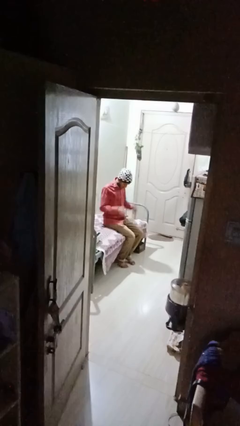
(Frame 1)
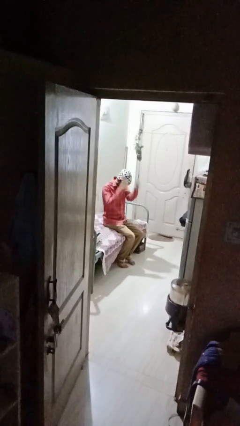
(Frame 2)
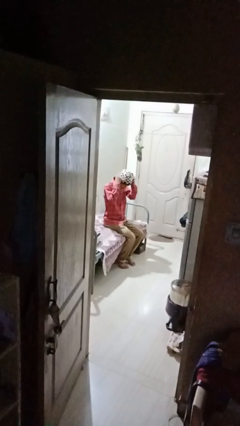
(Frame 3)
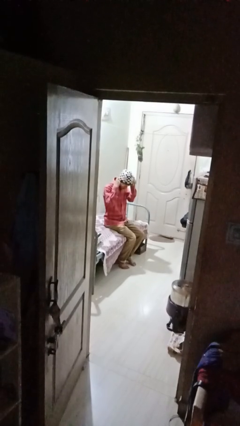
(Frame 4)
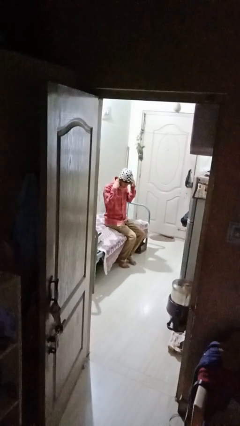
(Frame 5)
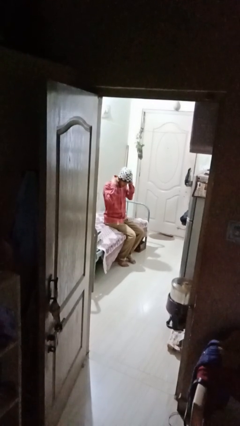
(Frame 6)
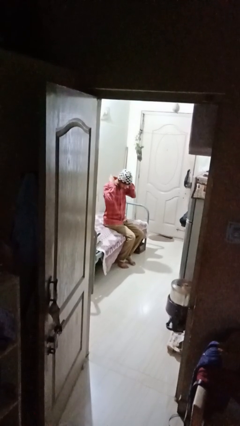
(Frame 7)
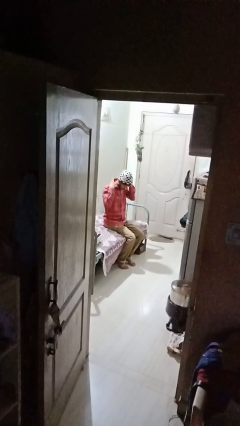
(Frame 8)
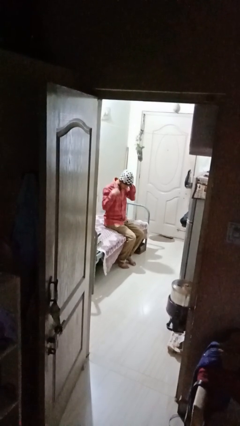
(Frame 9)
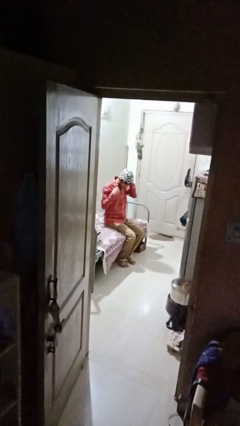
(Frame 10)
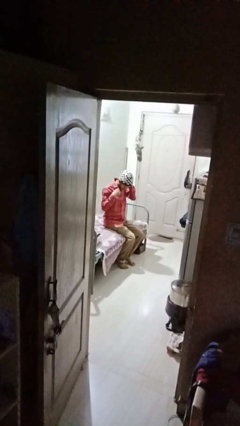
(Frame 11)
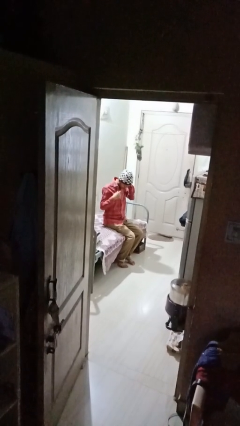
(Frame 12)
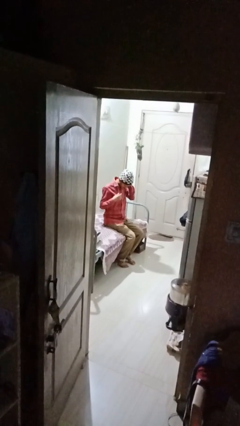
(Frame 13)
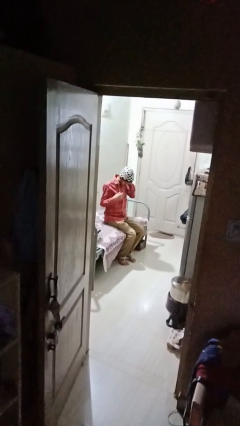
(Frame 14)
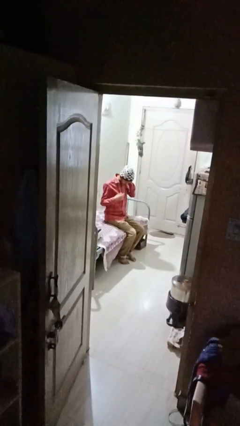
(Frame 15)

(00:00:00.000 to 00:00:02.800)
person puts on necklace

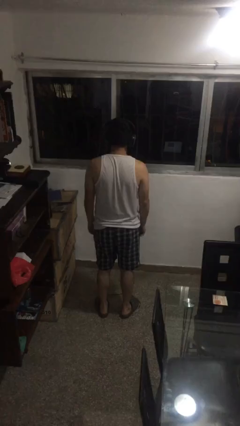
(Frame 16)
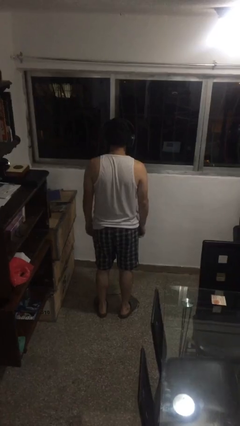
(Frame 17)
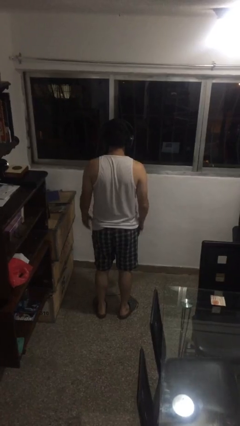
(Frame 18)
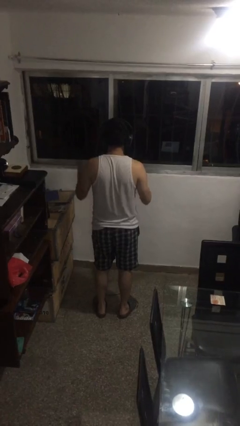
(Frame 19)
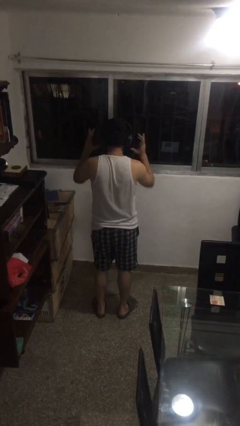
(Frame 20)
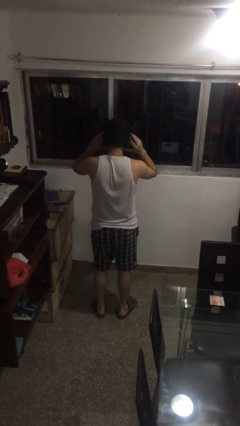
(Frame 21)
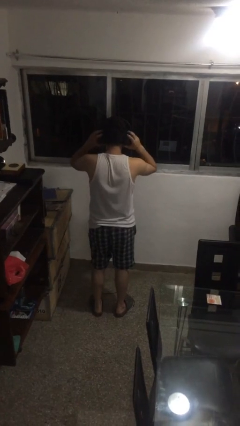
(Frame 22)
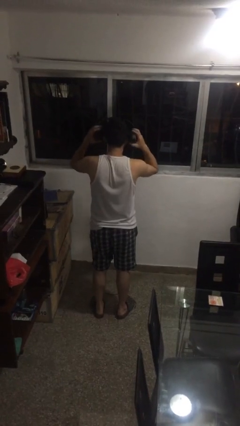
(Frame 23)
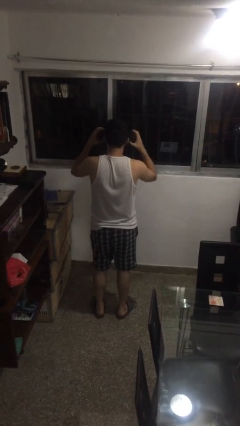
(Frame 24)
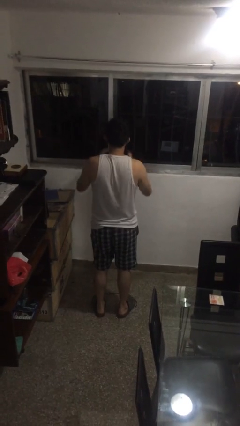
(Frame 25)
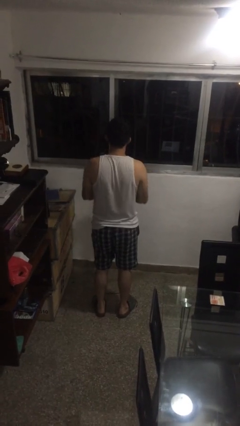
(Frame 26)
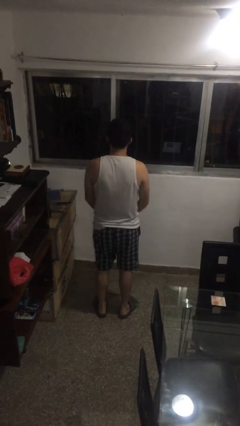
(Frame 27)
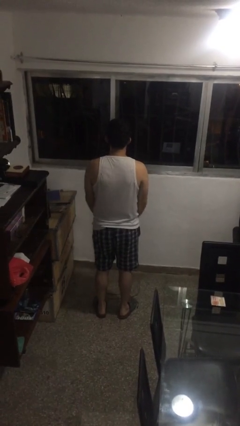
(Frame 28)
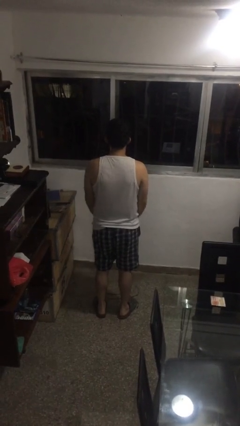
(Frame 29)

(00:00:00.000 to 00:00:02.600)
person takes off headphones

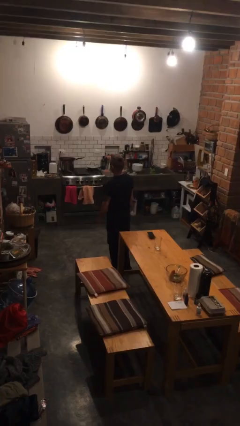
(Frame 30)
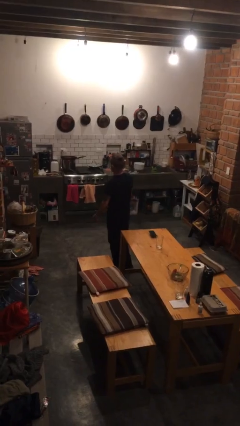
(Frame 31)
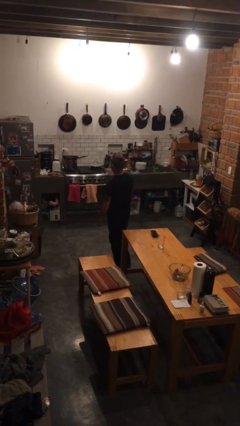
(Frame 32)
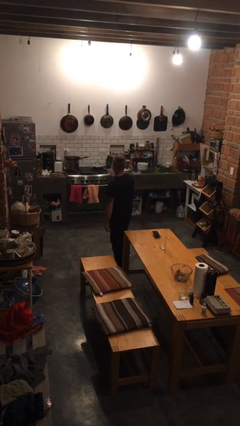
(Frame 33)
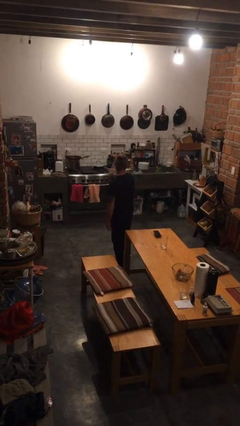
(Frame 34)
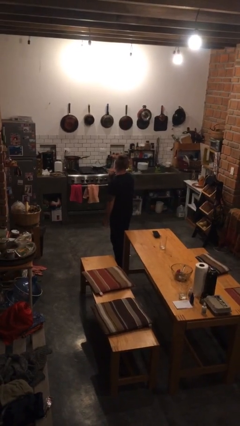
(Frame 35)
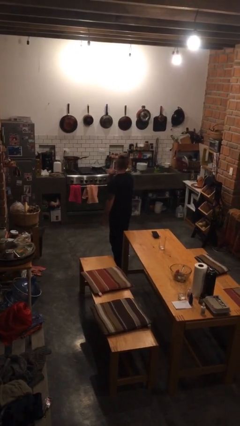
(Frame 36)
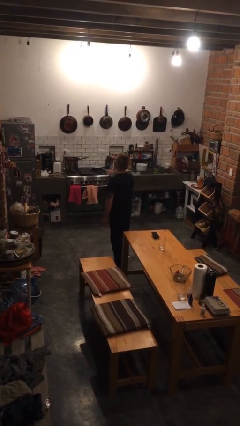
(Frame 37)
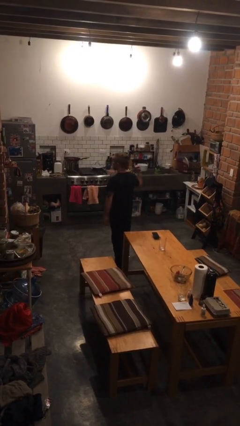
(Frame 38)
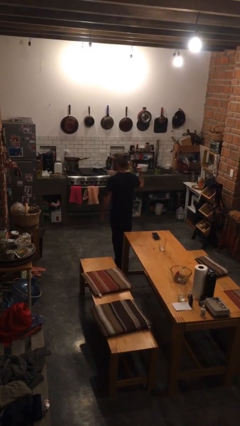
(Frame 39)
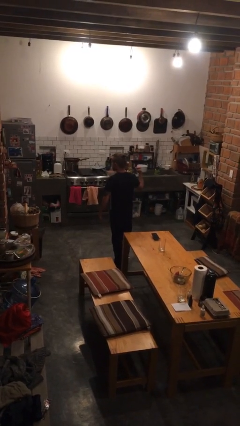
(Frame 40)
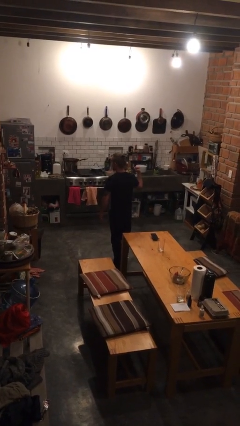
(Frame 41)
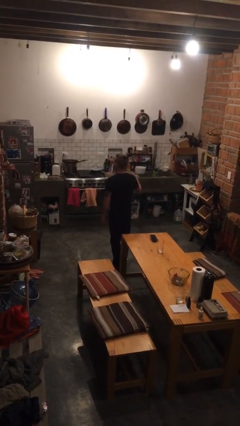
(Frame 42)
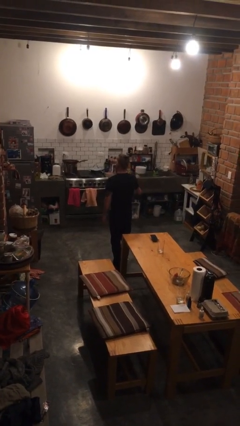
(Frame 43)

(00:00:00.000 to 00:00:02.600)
person gestures cut

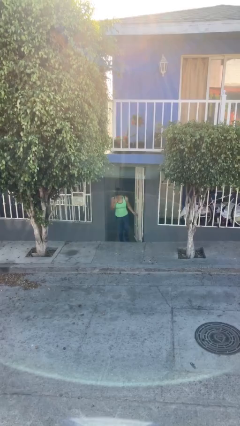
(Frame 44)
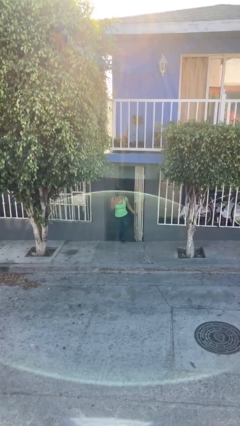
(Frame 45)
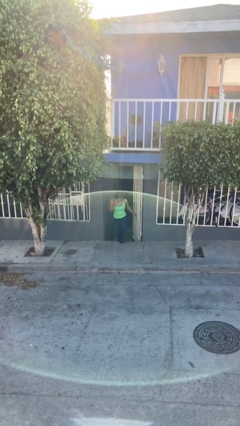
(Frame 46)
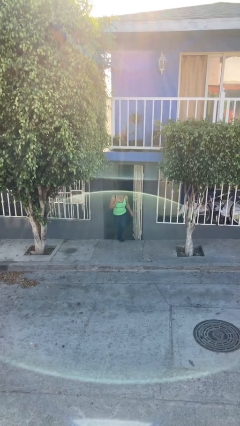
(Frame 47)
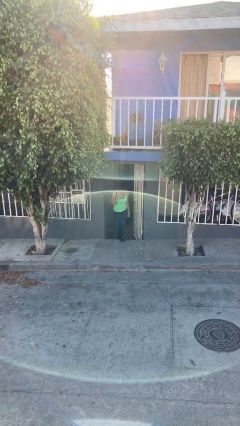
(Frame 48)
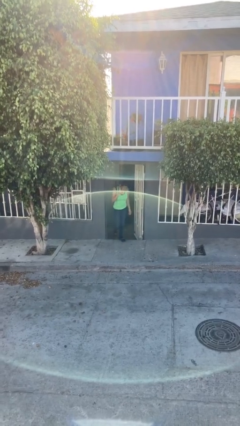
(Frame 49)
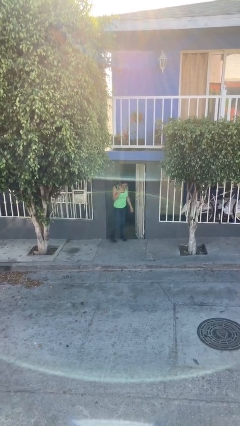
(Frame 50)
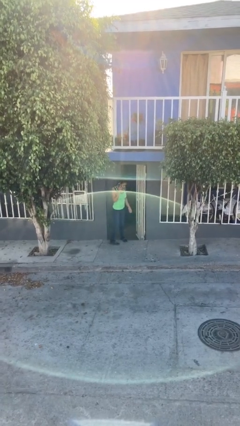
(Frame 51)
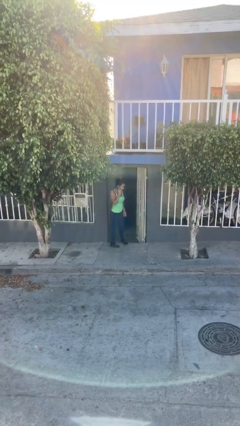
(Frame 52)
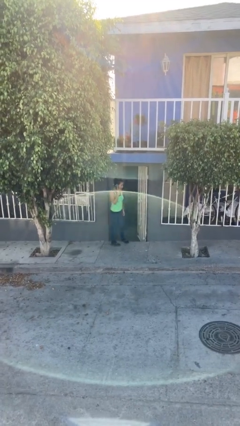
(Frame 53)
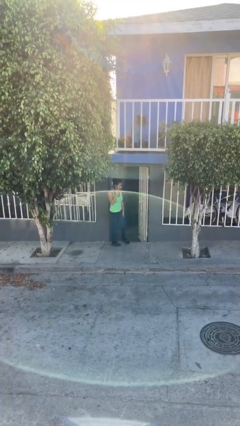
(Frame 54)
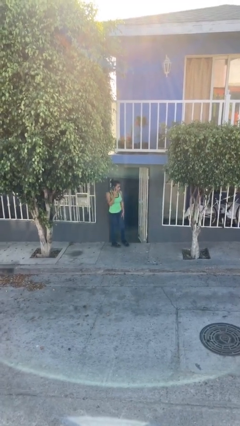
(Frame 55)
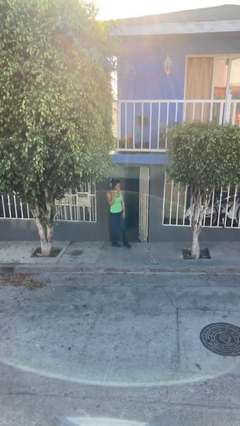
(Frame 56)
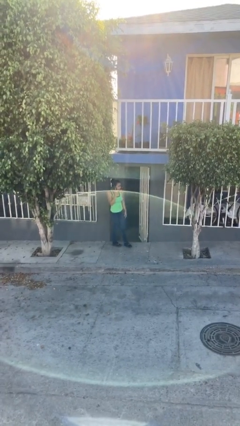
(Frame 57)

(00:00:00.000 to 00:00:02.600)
person enters scene through structure

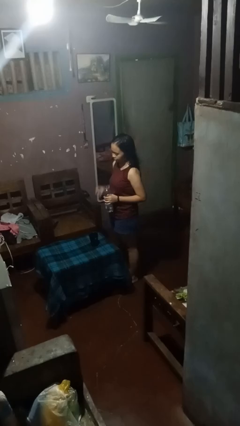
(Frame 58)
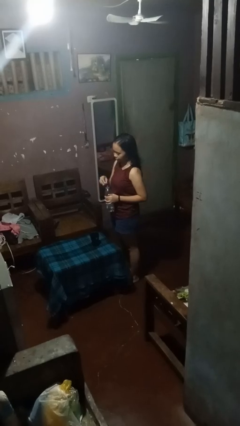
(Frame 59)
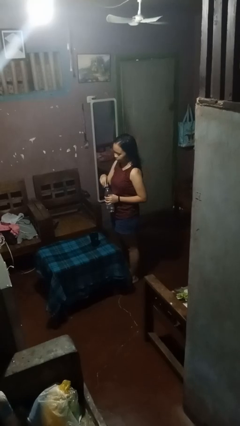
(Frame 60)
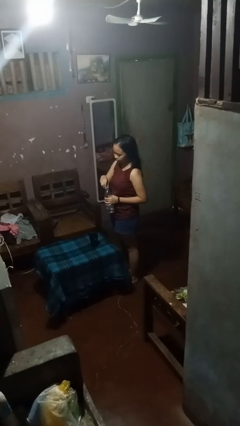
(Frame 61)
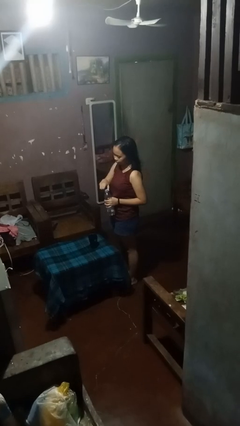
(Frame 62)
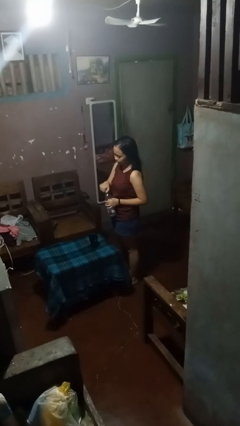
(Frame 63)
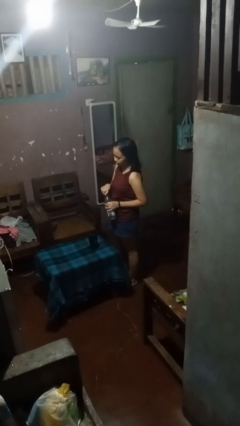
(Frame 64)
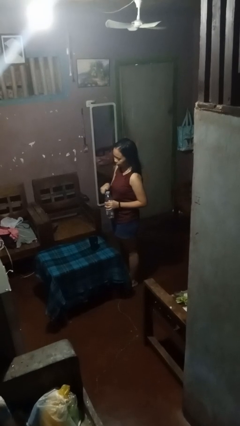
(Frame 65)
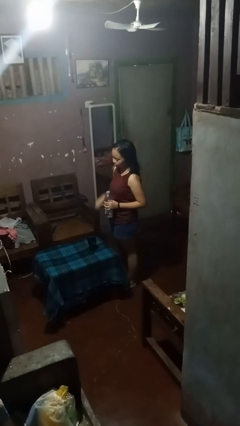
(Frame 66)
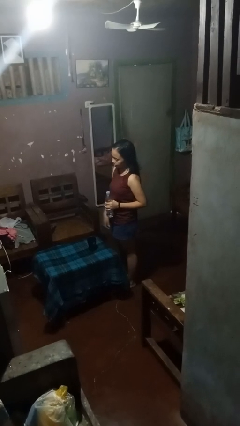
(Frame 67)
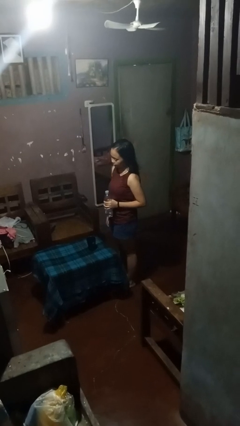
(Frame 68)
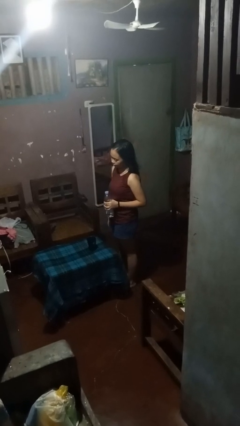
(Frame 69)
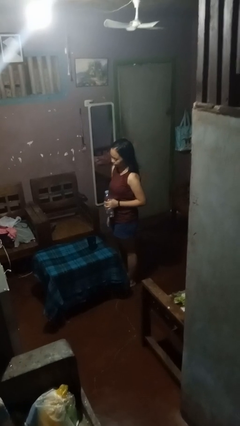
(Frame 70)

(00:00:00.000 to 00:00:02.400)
person screws lid to bottle

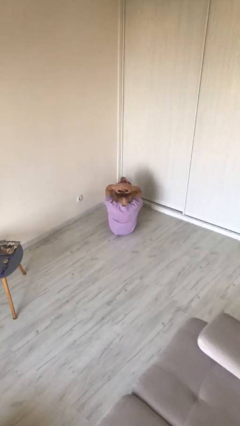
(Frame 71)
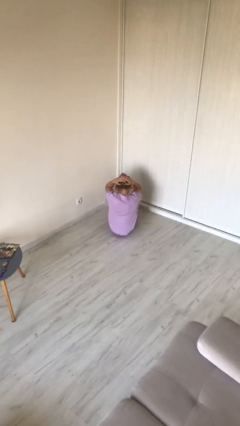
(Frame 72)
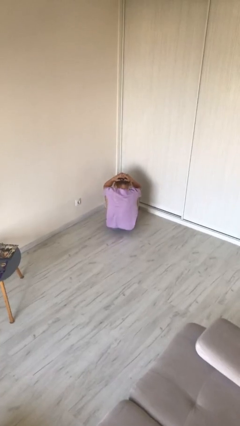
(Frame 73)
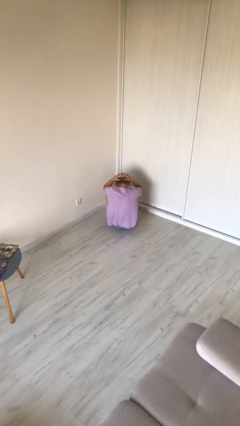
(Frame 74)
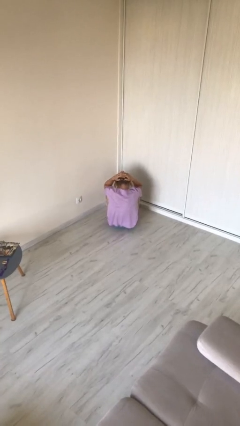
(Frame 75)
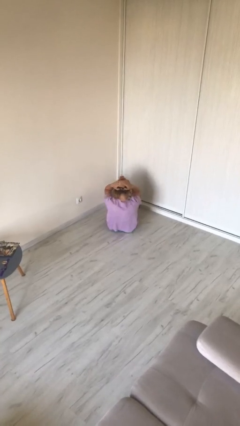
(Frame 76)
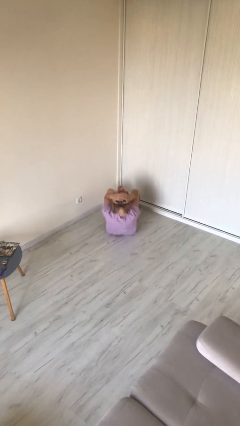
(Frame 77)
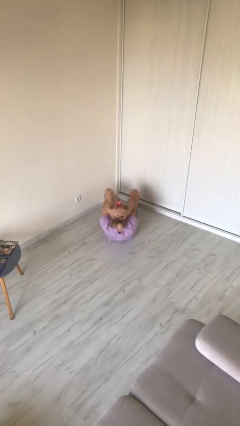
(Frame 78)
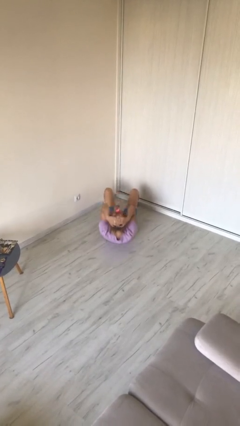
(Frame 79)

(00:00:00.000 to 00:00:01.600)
person exercises with situp

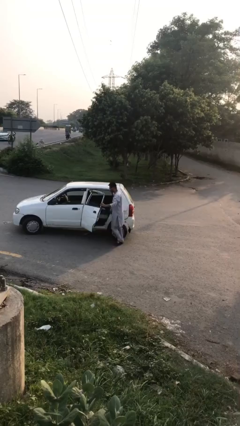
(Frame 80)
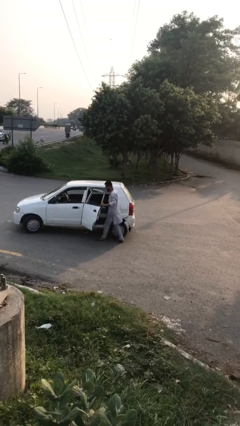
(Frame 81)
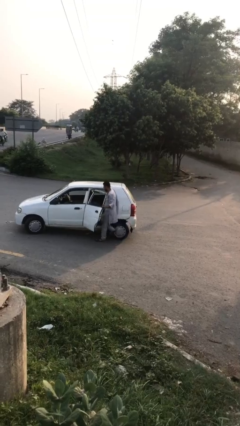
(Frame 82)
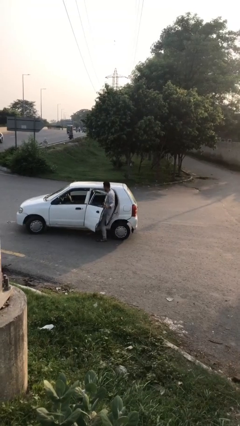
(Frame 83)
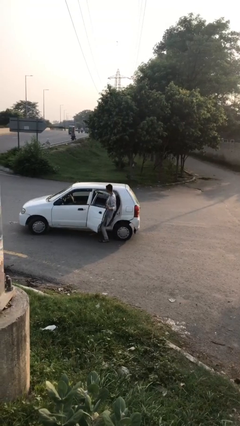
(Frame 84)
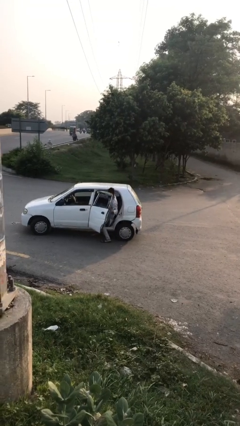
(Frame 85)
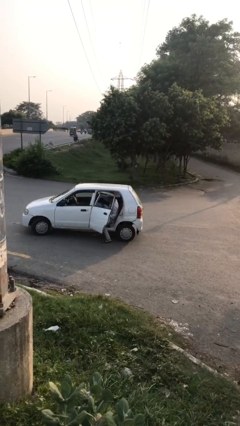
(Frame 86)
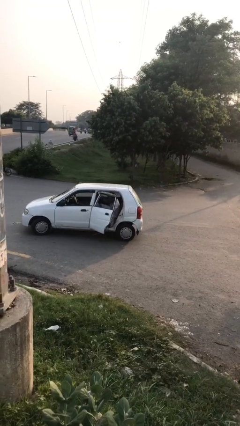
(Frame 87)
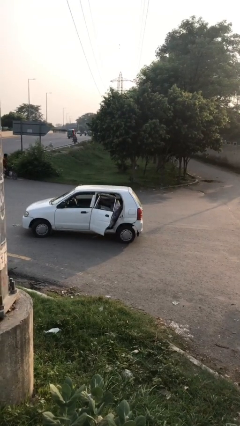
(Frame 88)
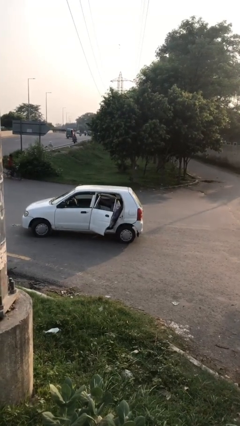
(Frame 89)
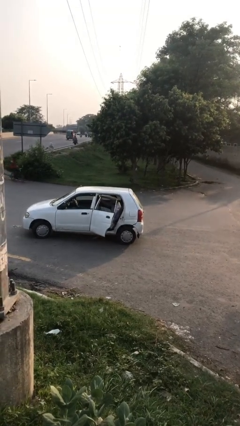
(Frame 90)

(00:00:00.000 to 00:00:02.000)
person enters car

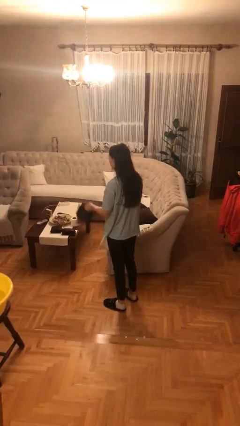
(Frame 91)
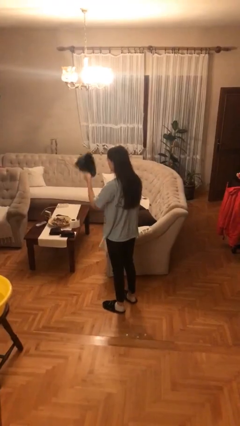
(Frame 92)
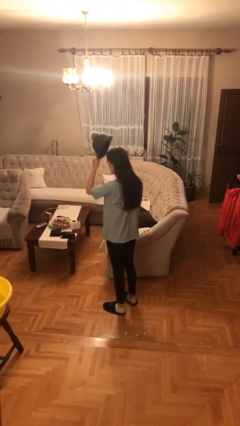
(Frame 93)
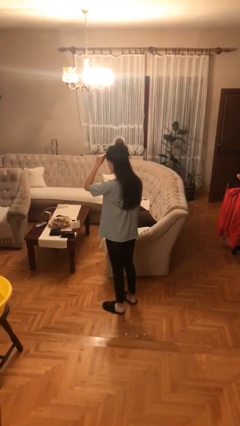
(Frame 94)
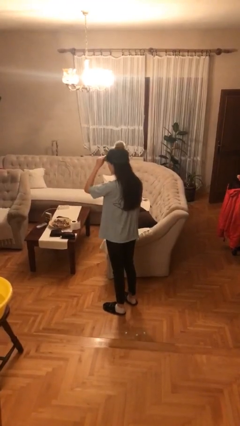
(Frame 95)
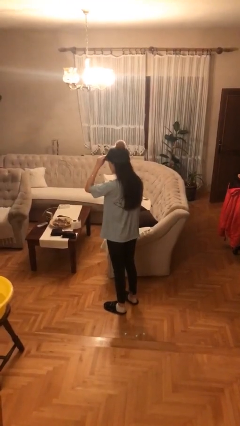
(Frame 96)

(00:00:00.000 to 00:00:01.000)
person puts on hat
